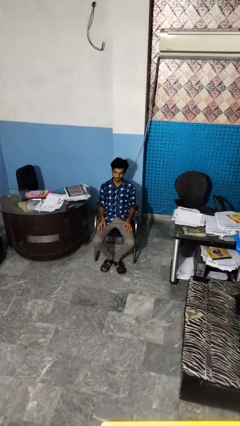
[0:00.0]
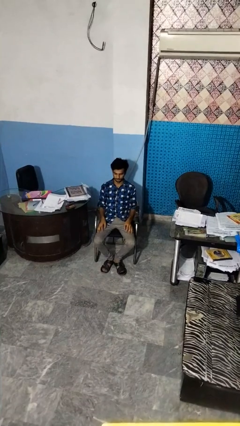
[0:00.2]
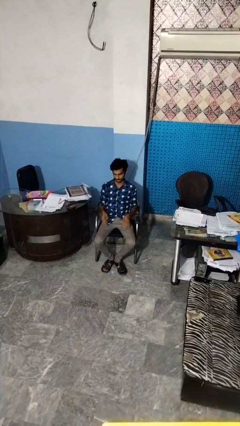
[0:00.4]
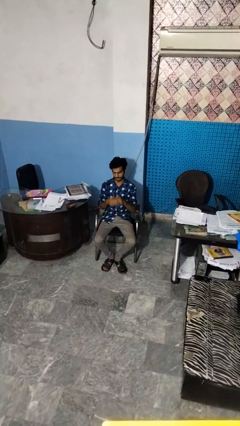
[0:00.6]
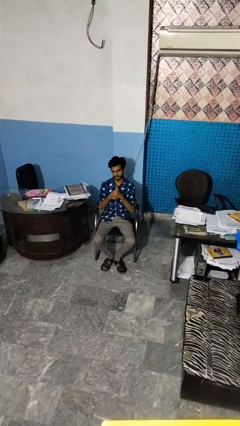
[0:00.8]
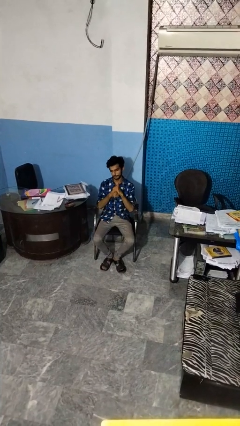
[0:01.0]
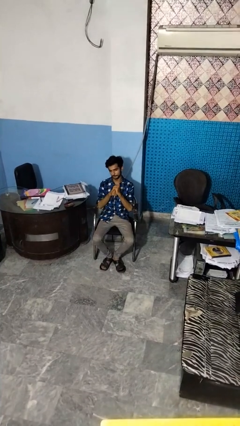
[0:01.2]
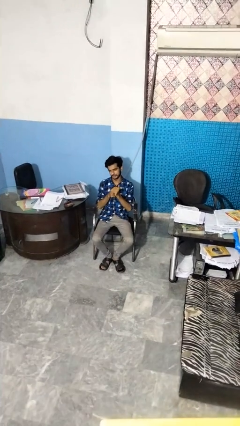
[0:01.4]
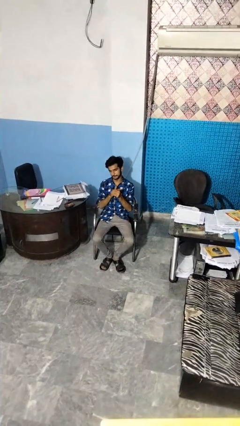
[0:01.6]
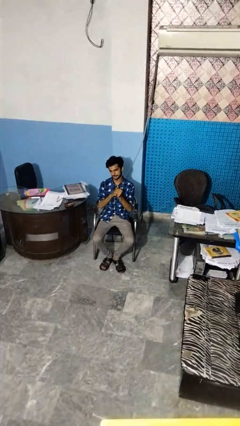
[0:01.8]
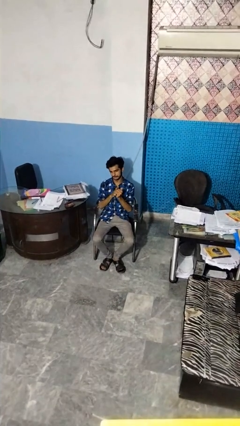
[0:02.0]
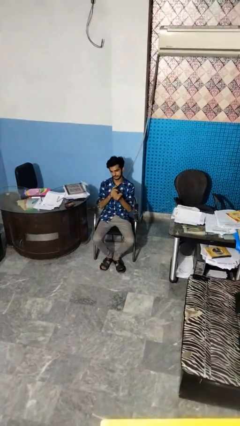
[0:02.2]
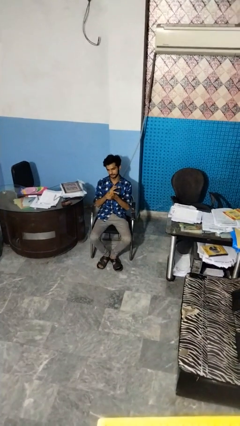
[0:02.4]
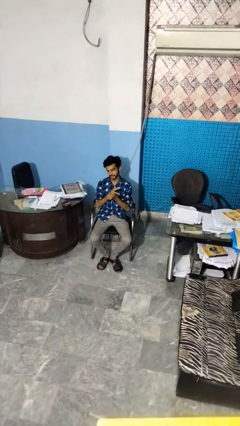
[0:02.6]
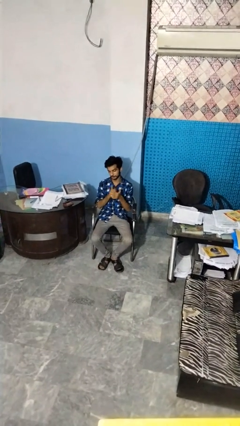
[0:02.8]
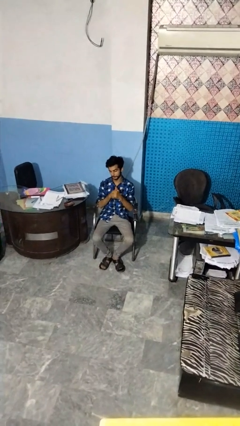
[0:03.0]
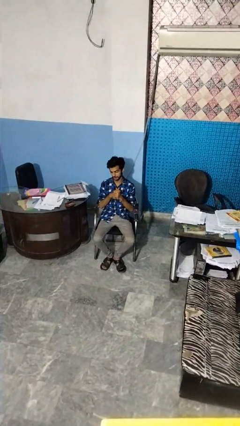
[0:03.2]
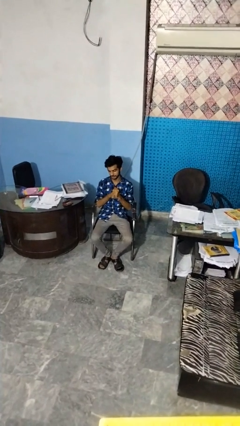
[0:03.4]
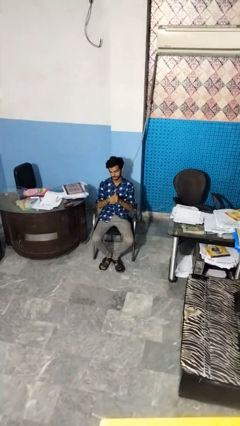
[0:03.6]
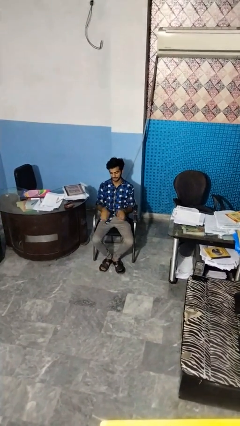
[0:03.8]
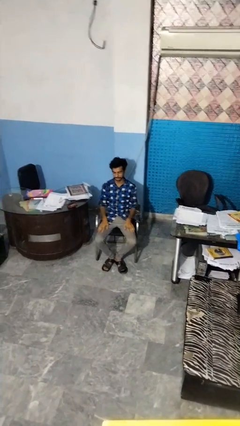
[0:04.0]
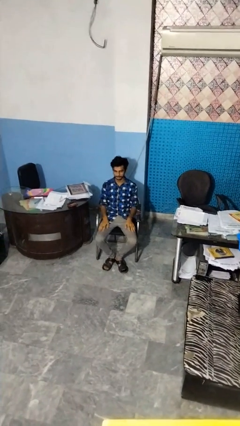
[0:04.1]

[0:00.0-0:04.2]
person cracks knuckles

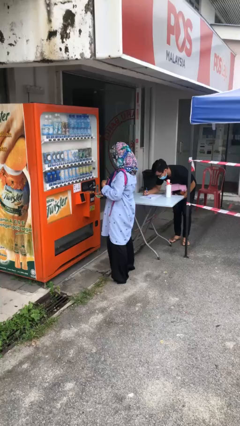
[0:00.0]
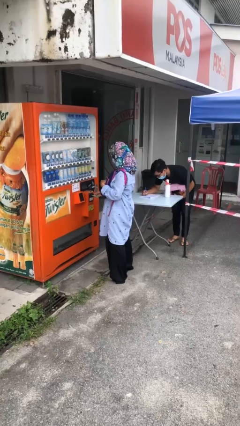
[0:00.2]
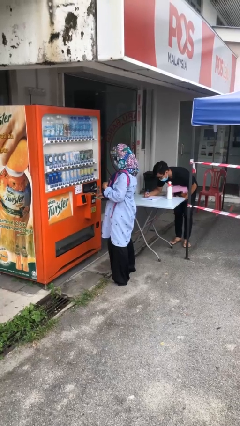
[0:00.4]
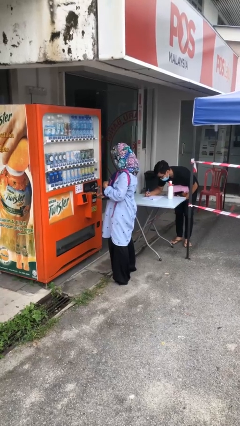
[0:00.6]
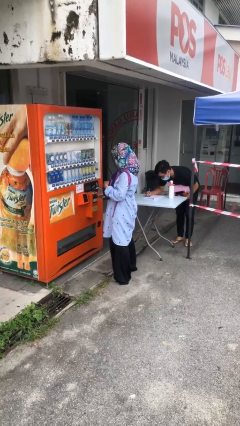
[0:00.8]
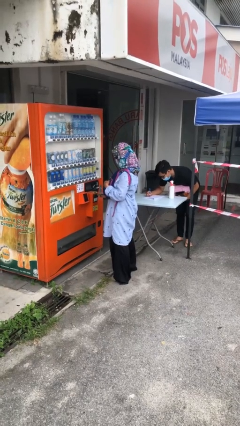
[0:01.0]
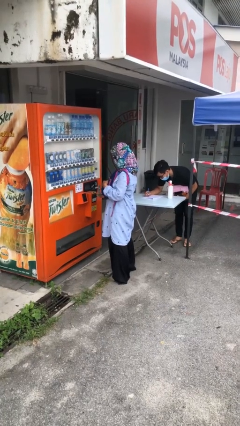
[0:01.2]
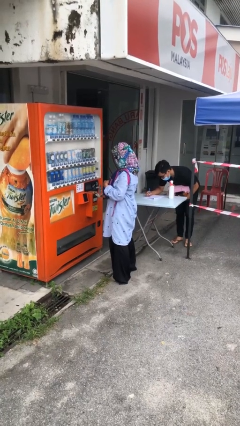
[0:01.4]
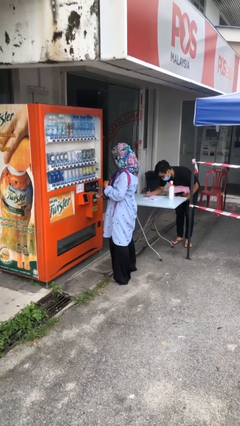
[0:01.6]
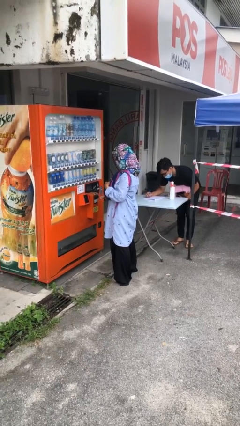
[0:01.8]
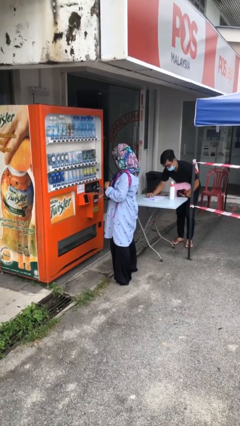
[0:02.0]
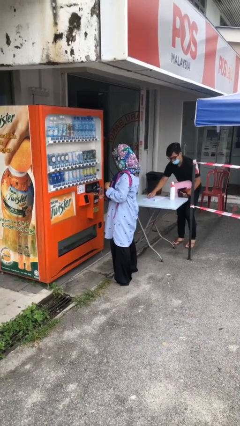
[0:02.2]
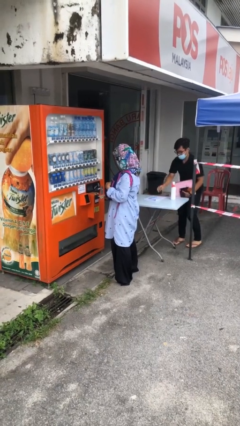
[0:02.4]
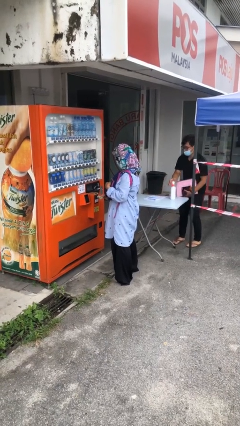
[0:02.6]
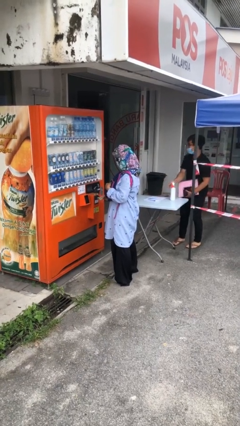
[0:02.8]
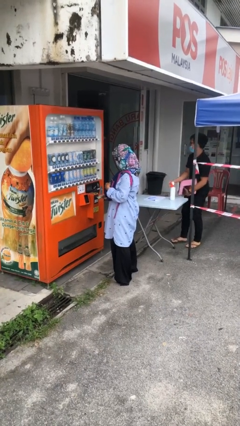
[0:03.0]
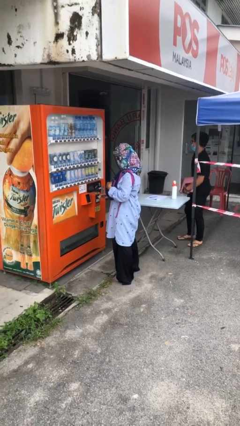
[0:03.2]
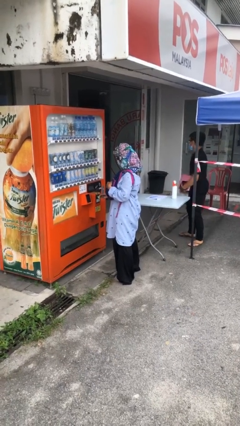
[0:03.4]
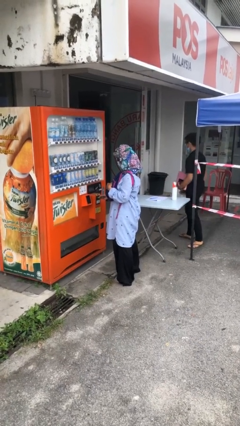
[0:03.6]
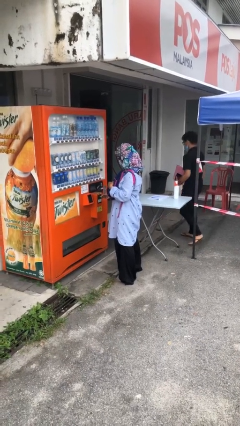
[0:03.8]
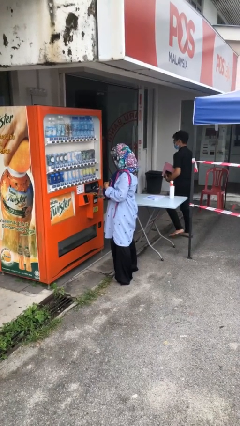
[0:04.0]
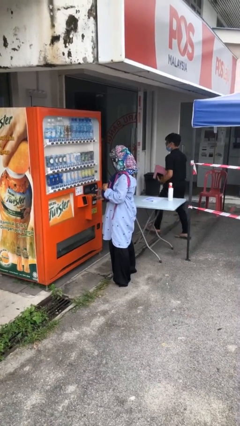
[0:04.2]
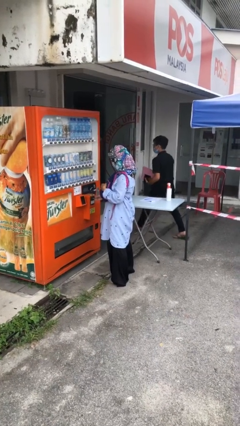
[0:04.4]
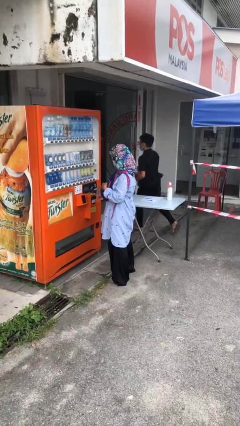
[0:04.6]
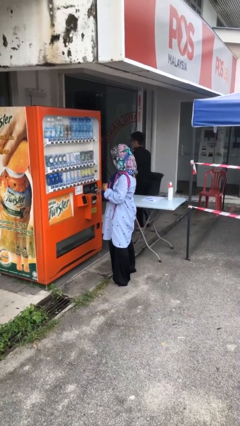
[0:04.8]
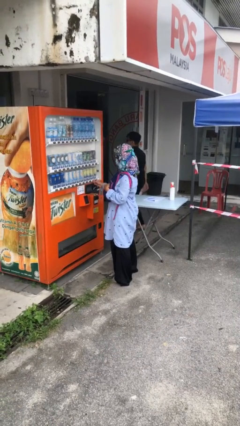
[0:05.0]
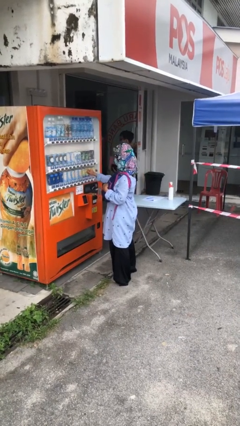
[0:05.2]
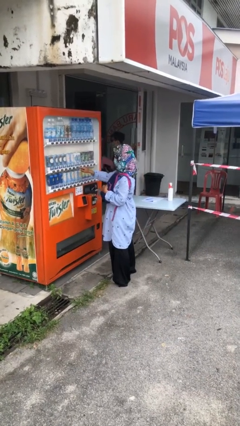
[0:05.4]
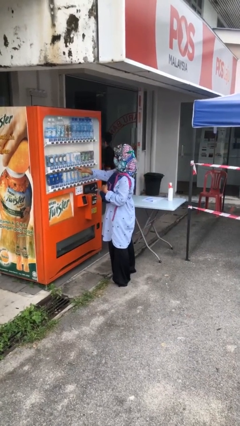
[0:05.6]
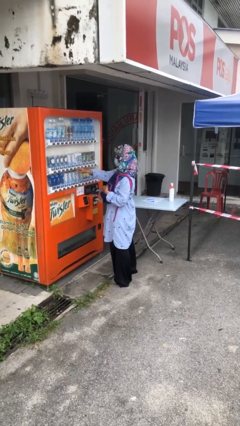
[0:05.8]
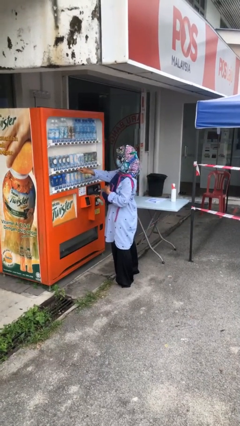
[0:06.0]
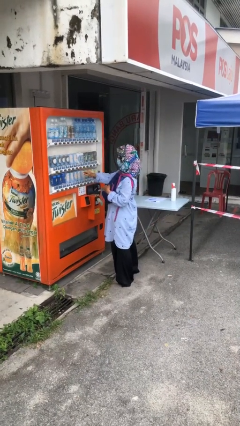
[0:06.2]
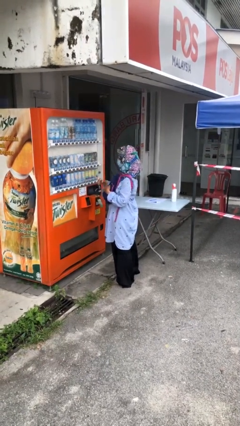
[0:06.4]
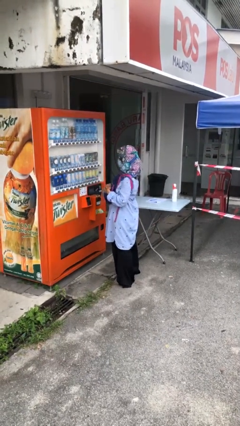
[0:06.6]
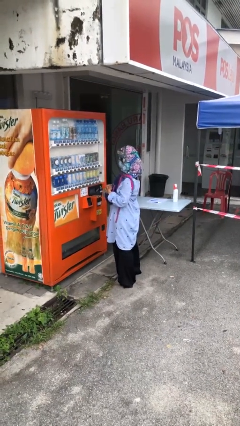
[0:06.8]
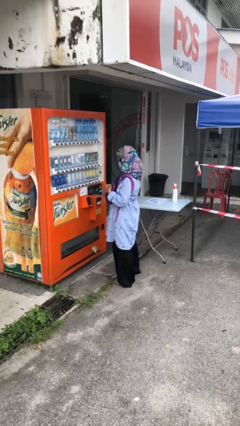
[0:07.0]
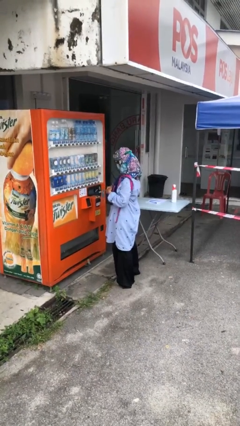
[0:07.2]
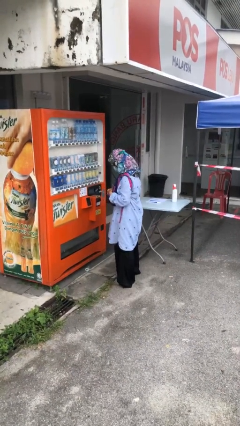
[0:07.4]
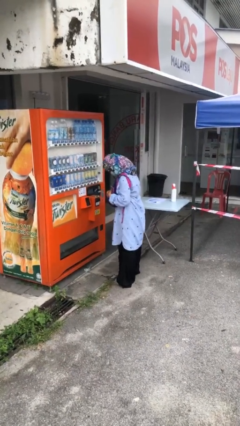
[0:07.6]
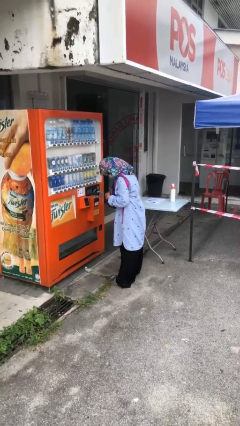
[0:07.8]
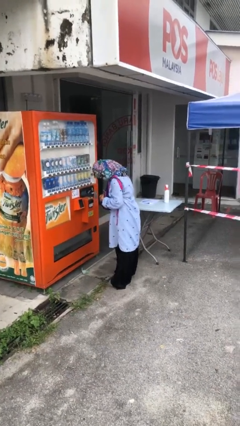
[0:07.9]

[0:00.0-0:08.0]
person purchases from machine

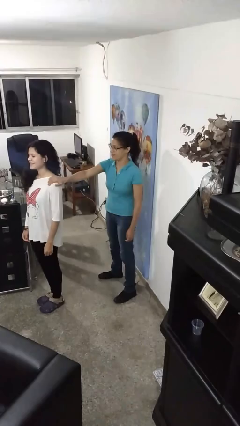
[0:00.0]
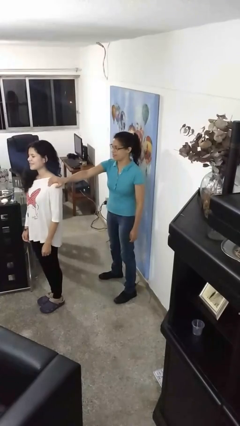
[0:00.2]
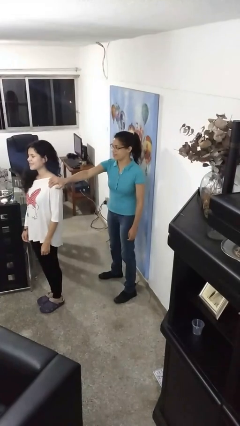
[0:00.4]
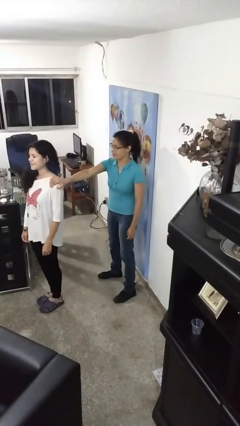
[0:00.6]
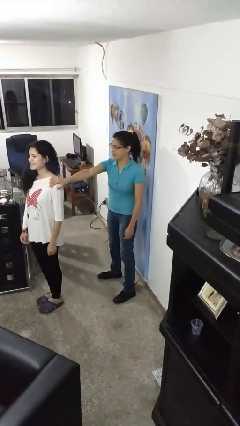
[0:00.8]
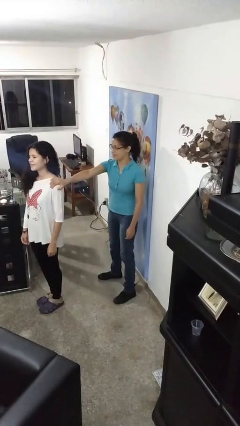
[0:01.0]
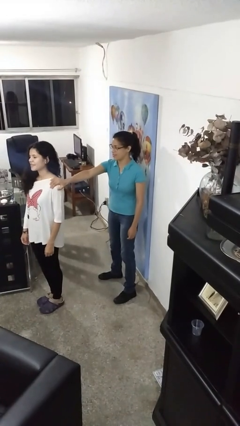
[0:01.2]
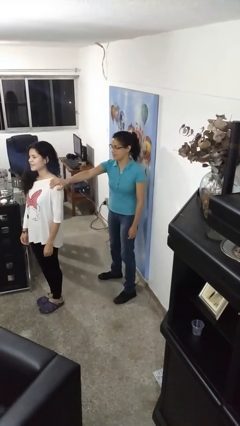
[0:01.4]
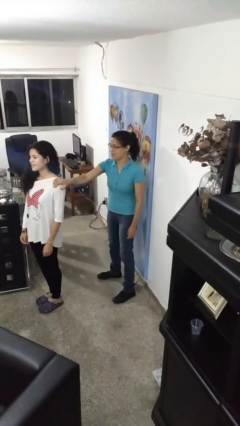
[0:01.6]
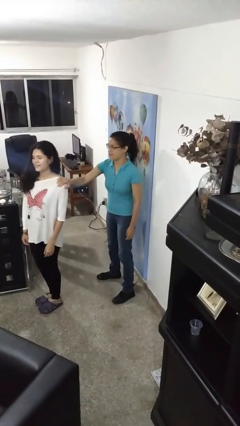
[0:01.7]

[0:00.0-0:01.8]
person grabs person by shoulder

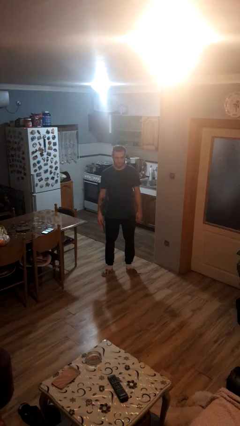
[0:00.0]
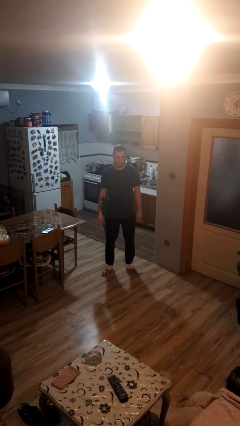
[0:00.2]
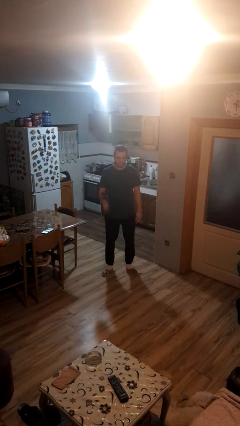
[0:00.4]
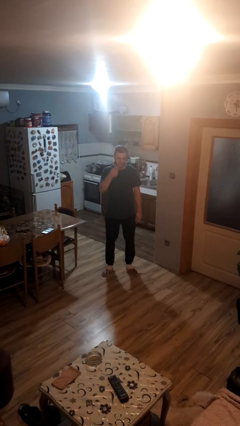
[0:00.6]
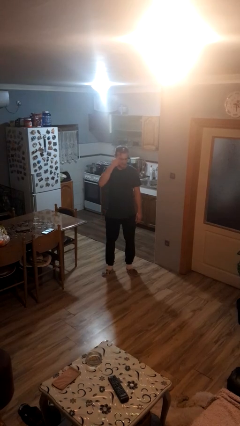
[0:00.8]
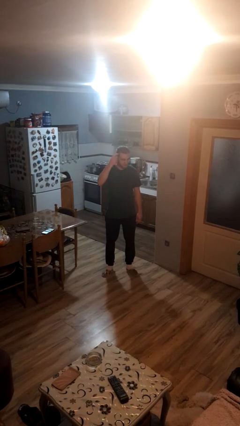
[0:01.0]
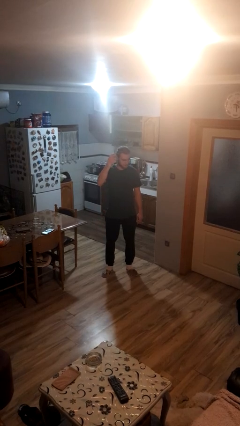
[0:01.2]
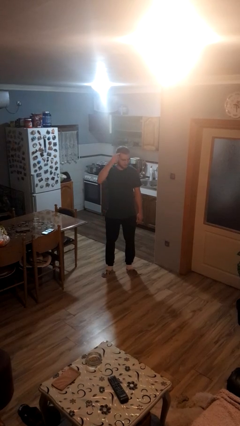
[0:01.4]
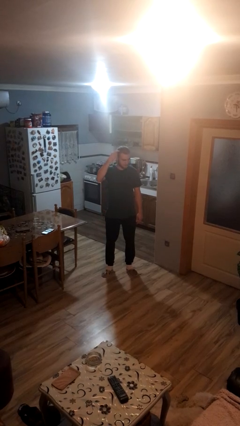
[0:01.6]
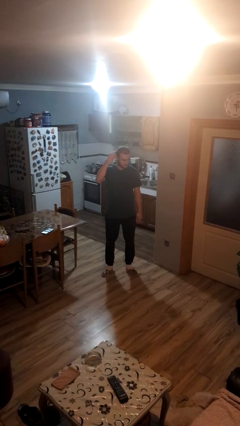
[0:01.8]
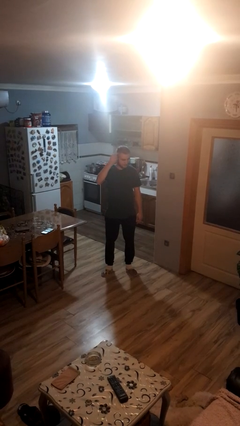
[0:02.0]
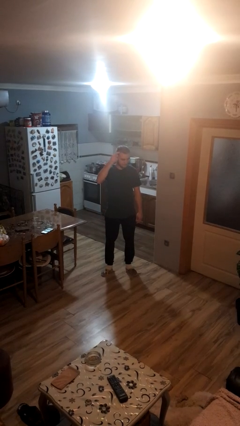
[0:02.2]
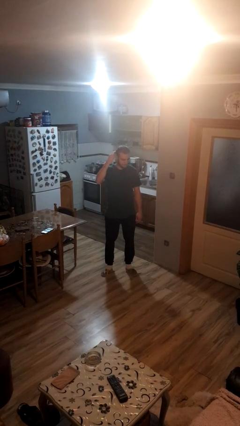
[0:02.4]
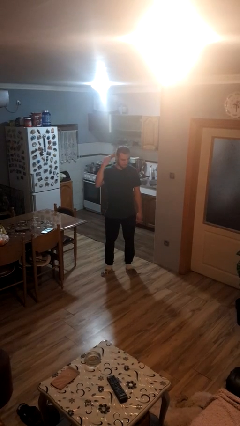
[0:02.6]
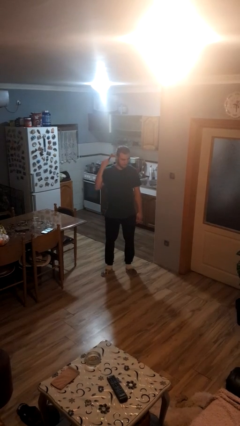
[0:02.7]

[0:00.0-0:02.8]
person brushes hair

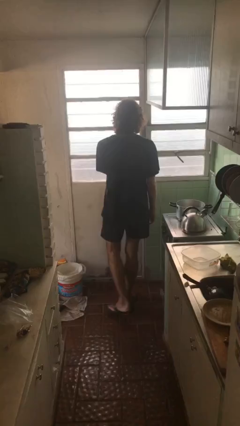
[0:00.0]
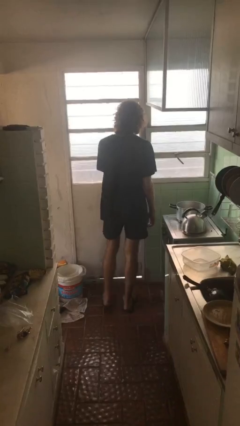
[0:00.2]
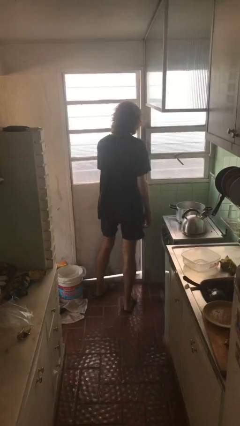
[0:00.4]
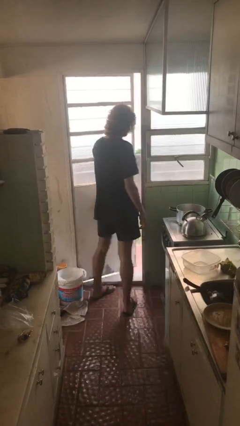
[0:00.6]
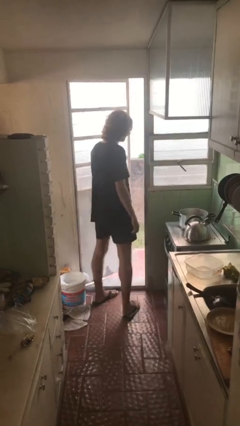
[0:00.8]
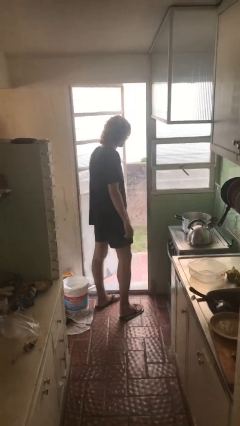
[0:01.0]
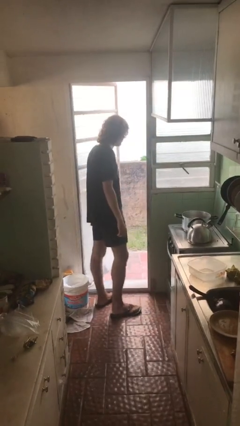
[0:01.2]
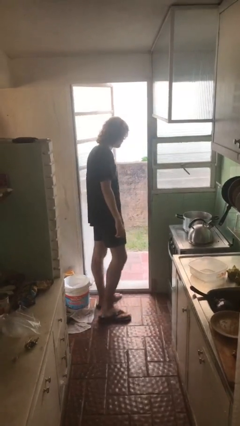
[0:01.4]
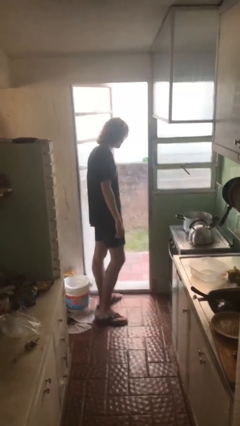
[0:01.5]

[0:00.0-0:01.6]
person opens facility door
